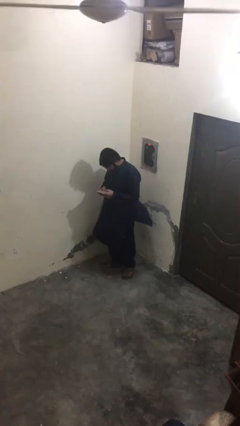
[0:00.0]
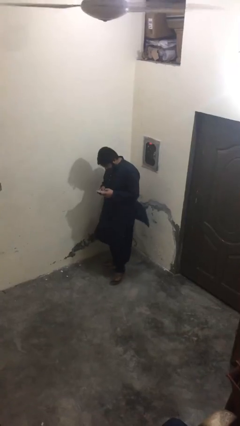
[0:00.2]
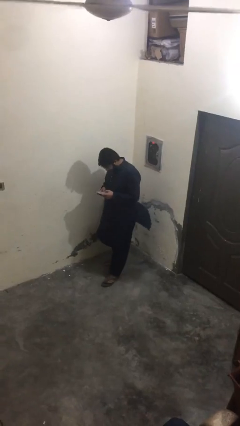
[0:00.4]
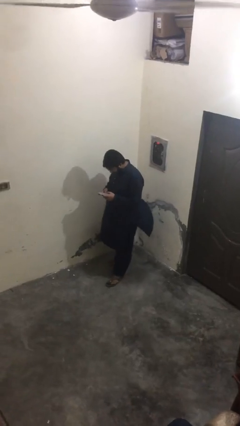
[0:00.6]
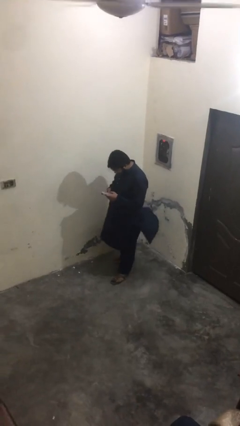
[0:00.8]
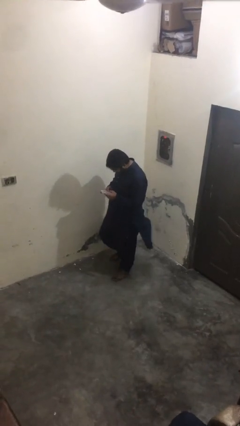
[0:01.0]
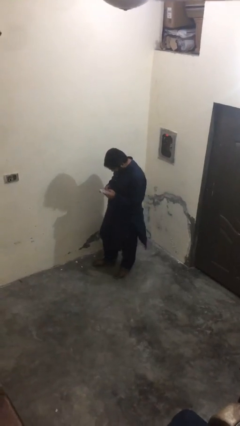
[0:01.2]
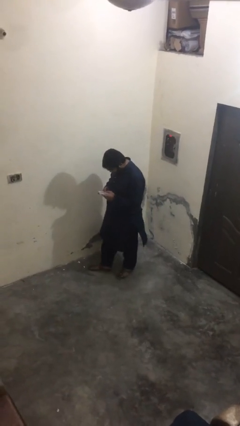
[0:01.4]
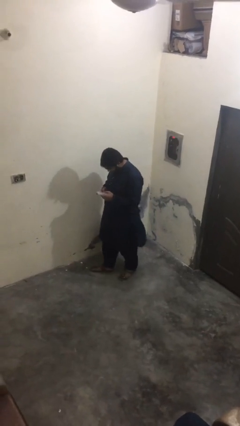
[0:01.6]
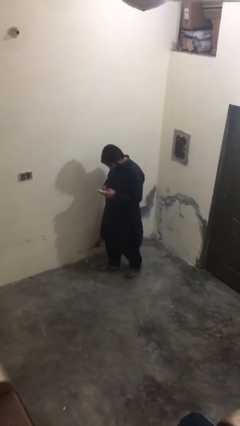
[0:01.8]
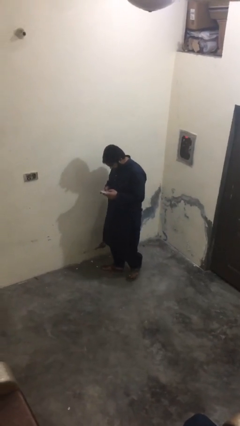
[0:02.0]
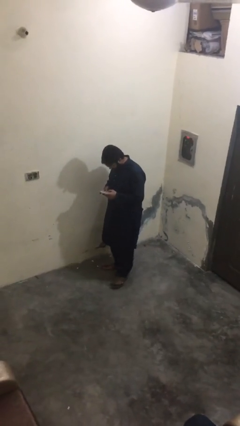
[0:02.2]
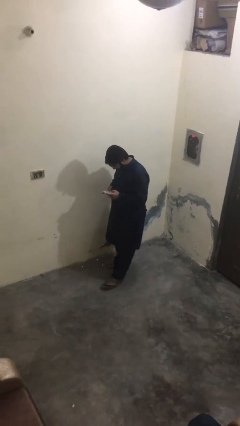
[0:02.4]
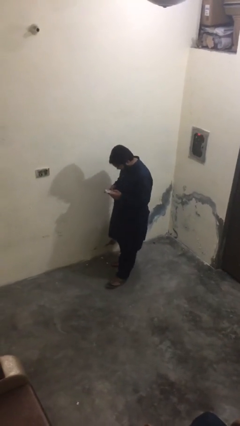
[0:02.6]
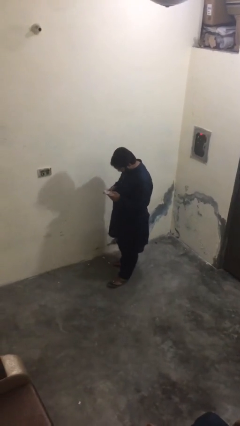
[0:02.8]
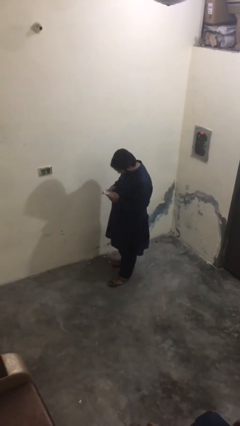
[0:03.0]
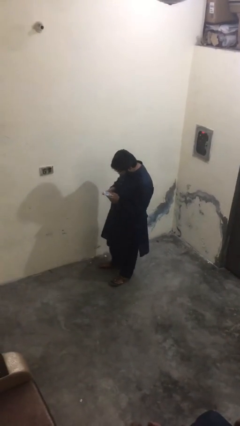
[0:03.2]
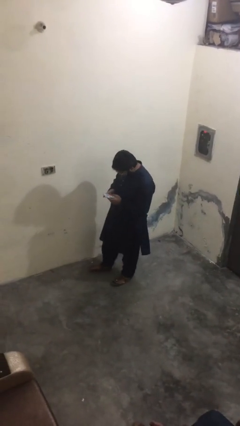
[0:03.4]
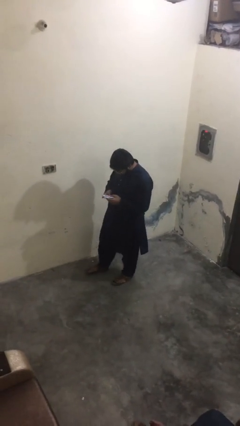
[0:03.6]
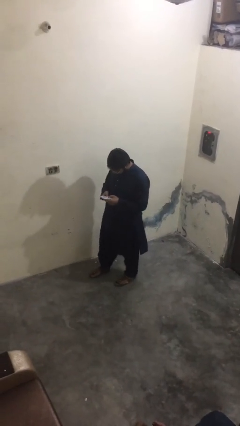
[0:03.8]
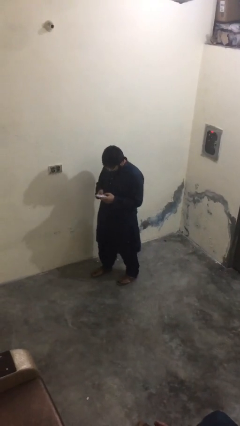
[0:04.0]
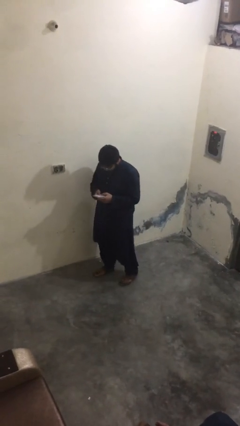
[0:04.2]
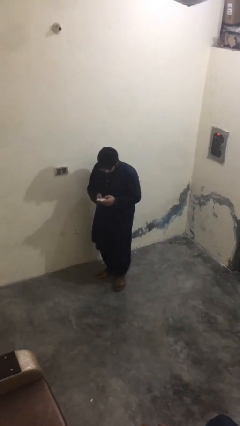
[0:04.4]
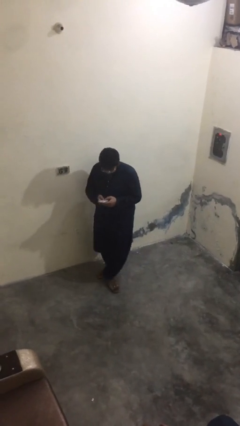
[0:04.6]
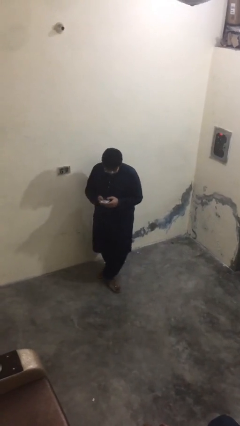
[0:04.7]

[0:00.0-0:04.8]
person texts on phone

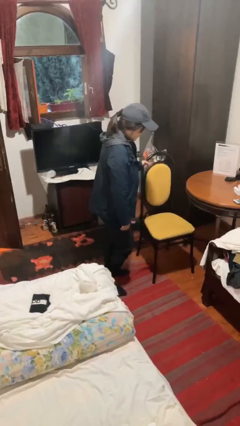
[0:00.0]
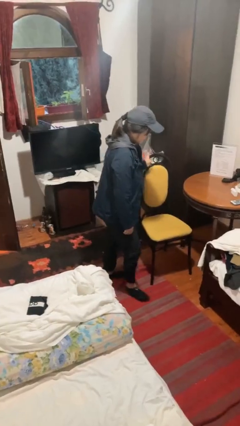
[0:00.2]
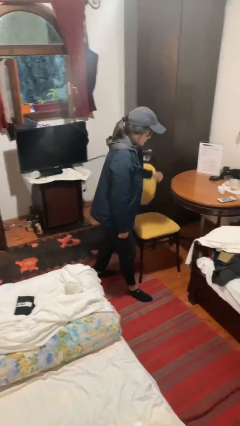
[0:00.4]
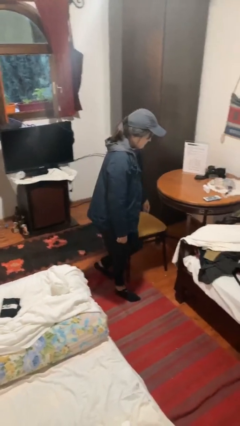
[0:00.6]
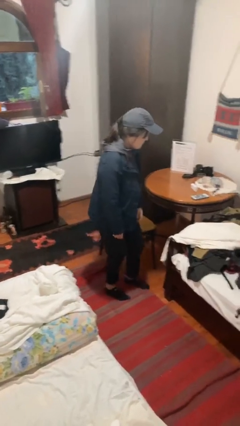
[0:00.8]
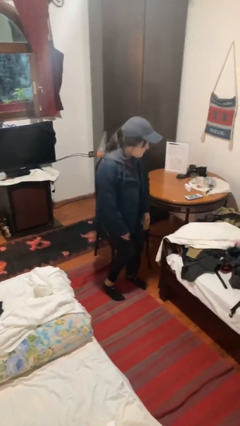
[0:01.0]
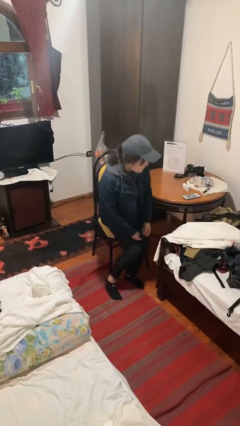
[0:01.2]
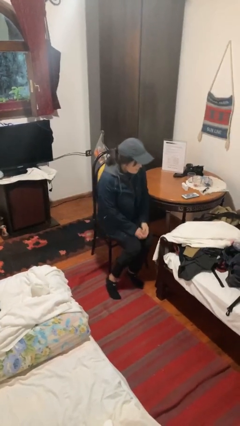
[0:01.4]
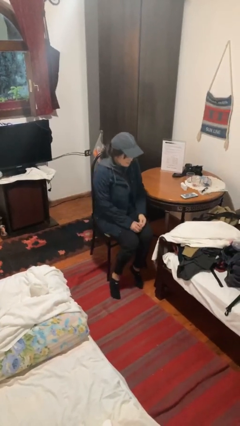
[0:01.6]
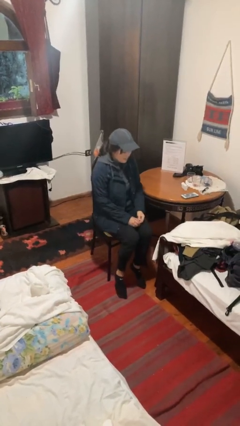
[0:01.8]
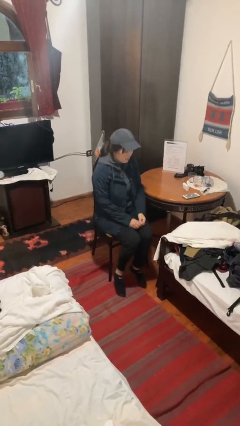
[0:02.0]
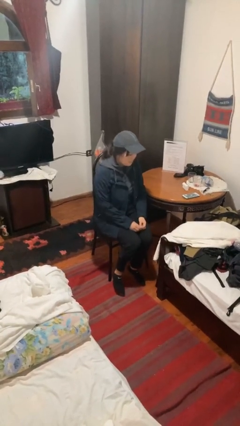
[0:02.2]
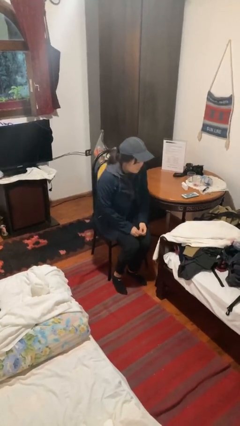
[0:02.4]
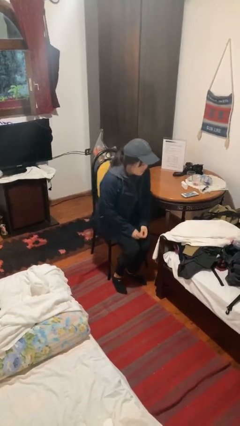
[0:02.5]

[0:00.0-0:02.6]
person sits down

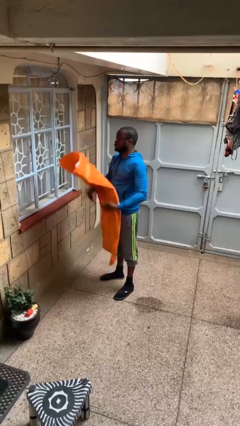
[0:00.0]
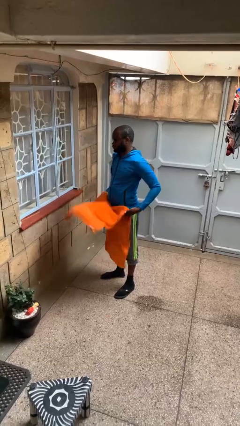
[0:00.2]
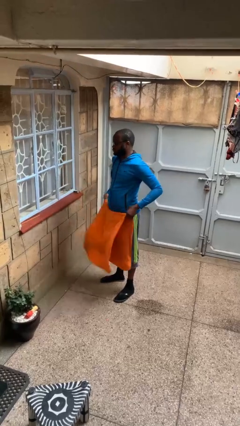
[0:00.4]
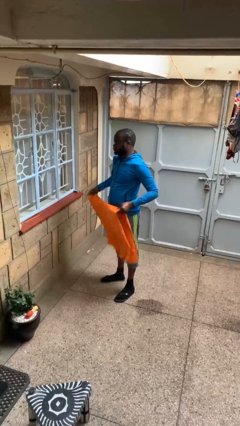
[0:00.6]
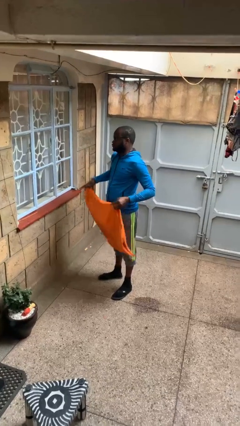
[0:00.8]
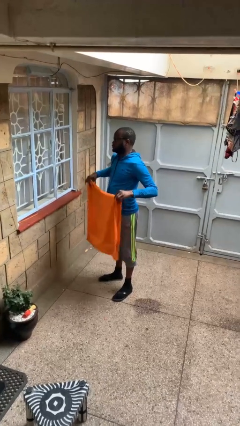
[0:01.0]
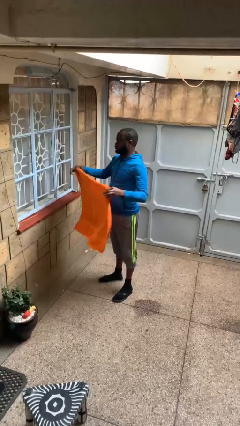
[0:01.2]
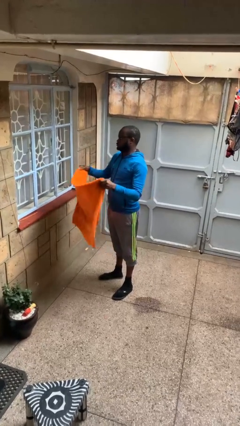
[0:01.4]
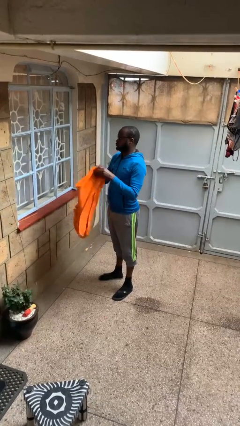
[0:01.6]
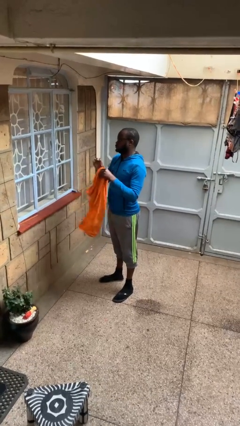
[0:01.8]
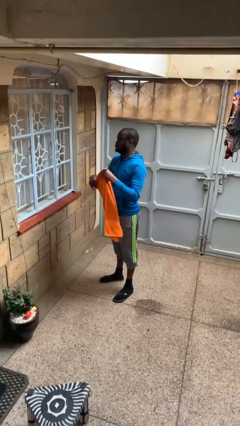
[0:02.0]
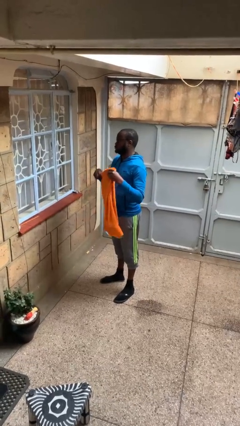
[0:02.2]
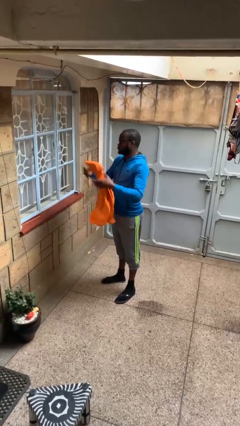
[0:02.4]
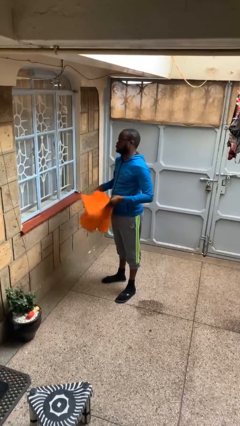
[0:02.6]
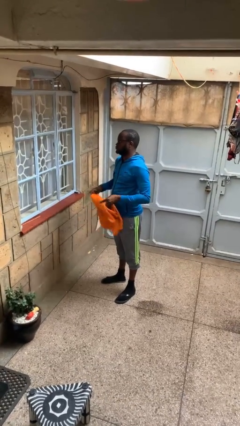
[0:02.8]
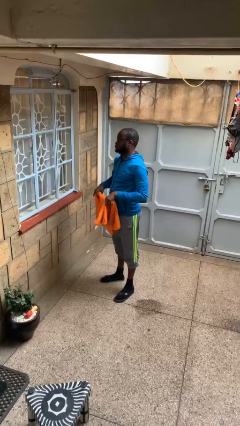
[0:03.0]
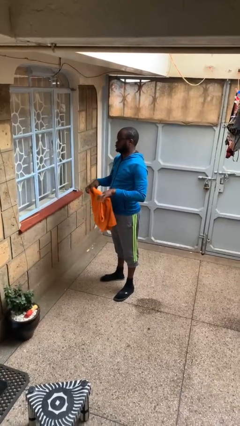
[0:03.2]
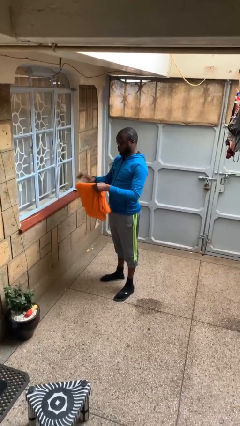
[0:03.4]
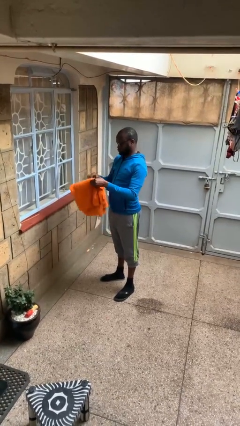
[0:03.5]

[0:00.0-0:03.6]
person folds towel

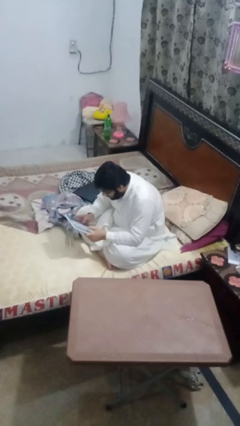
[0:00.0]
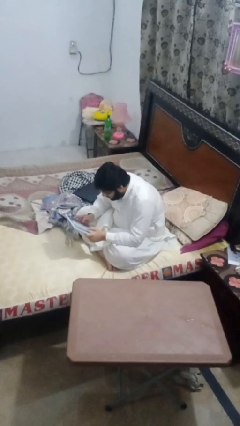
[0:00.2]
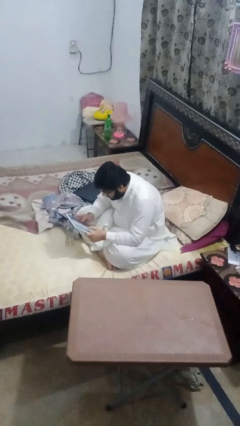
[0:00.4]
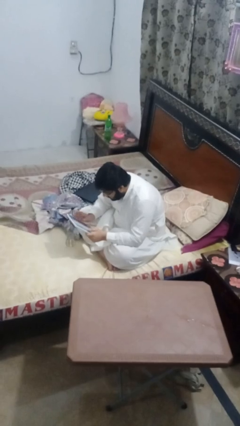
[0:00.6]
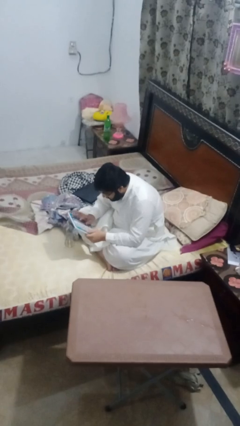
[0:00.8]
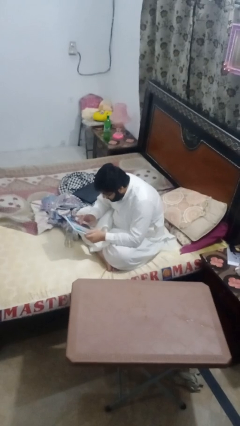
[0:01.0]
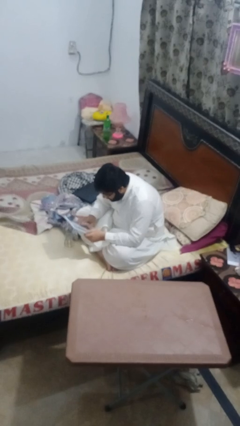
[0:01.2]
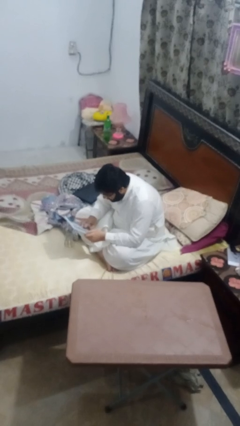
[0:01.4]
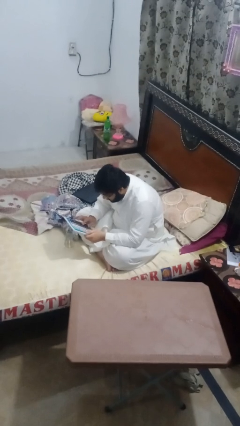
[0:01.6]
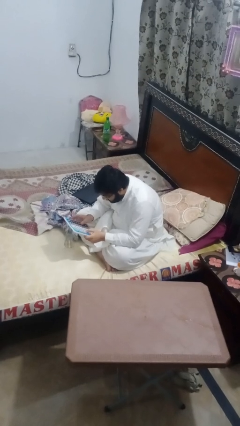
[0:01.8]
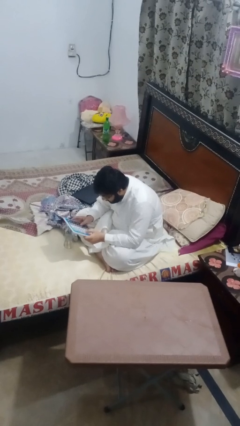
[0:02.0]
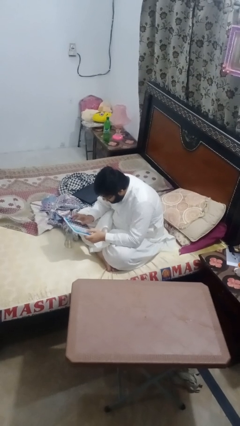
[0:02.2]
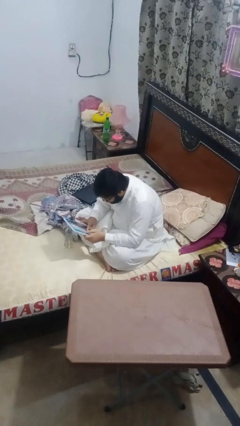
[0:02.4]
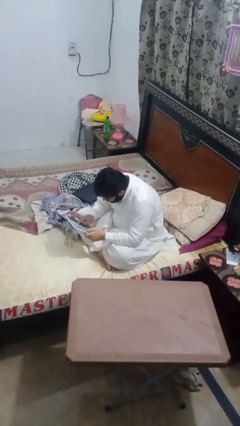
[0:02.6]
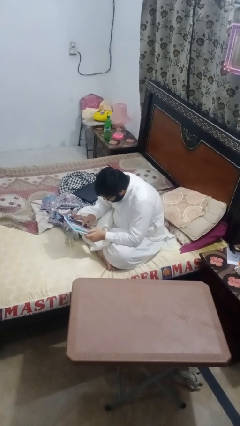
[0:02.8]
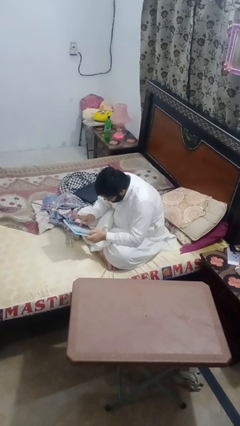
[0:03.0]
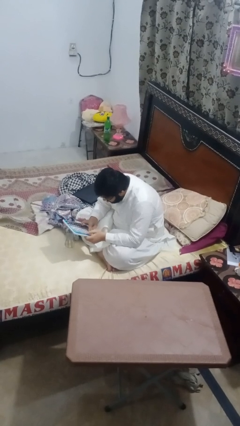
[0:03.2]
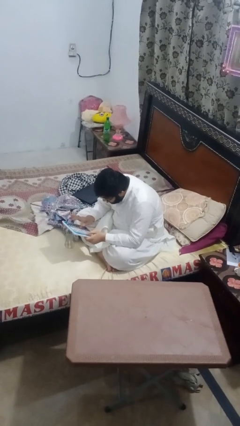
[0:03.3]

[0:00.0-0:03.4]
person interacts with tablet

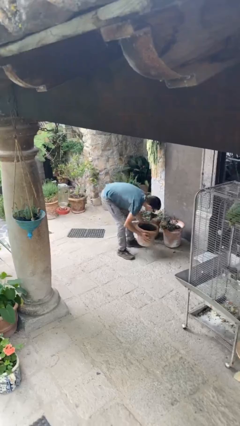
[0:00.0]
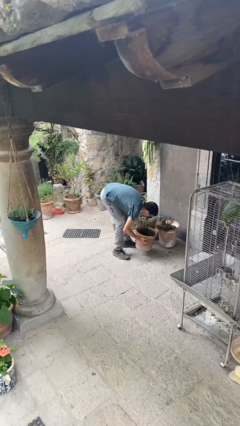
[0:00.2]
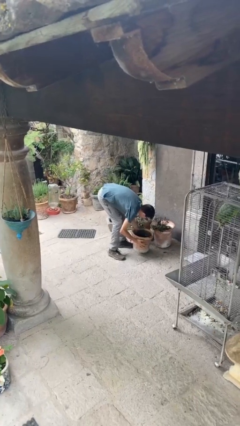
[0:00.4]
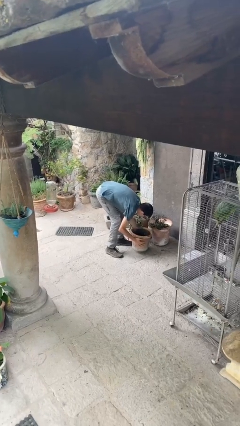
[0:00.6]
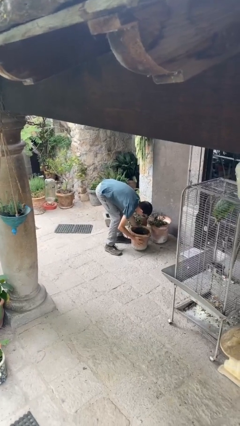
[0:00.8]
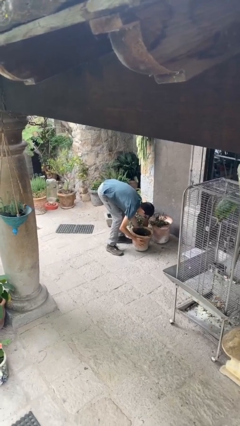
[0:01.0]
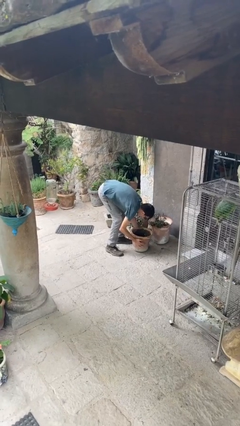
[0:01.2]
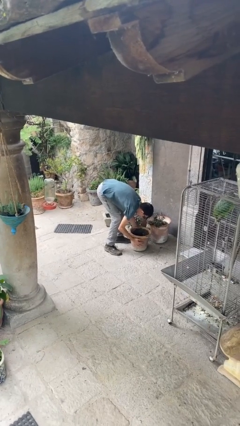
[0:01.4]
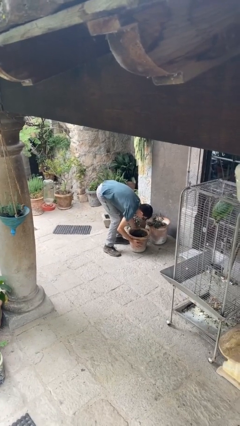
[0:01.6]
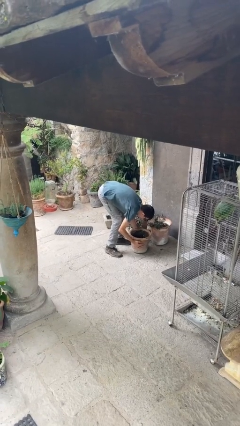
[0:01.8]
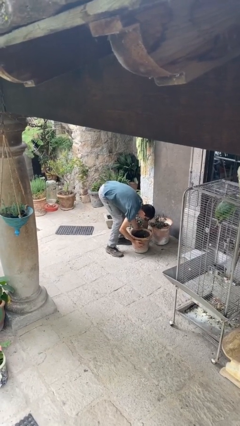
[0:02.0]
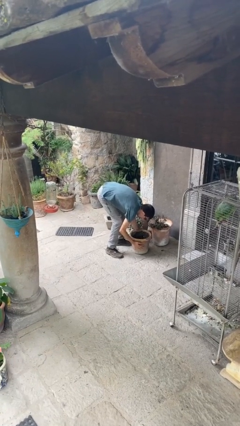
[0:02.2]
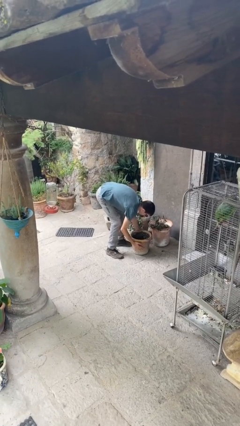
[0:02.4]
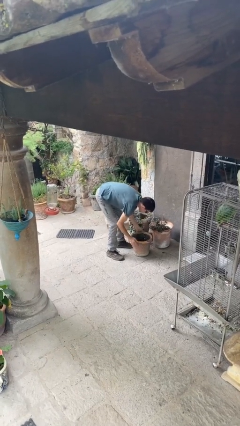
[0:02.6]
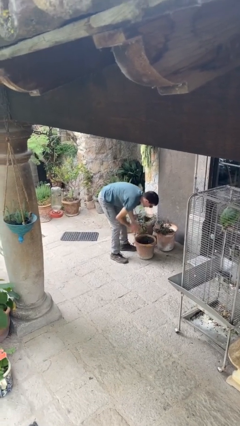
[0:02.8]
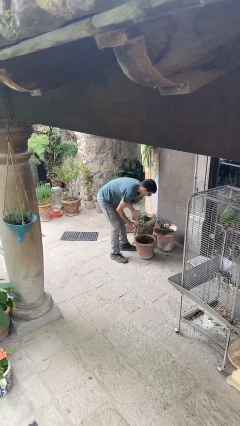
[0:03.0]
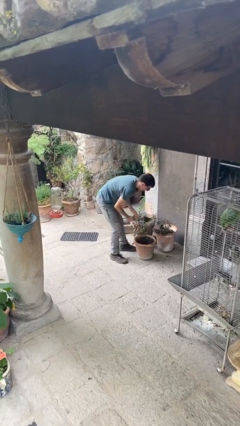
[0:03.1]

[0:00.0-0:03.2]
person puts down object on floor

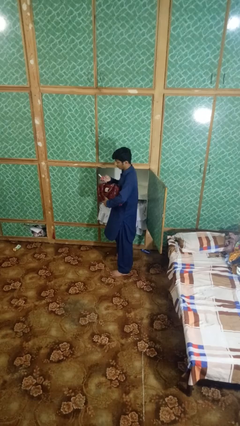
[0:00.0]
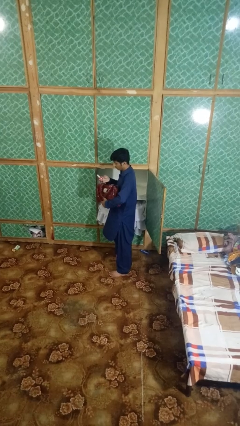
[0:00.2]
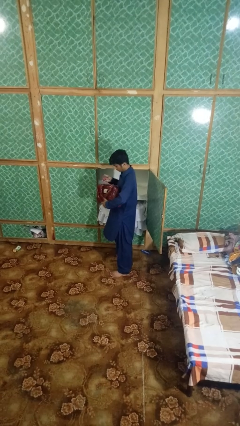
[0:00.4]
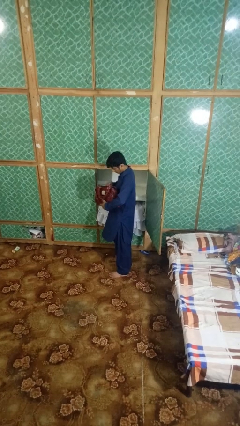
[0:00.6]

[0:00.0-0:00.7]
person puts object into purse
